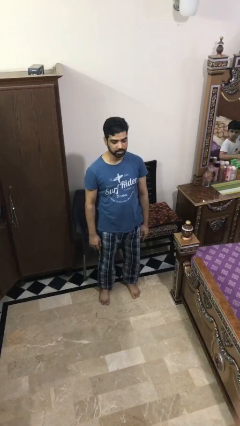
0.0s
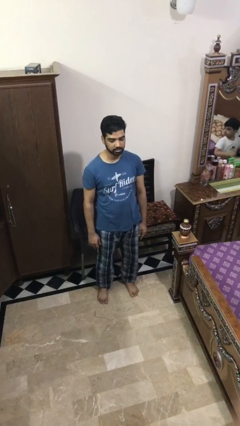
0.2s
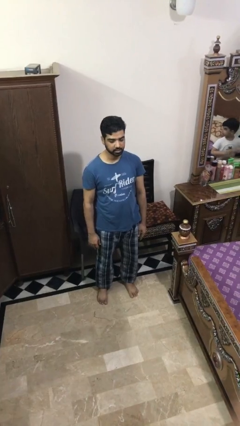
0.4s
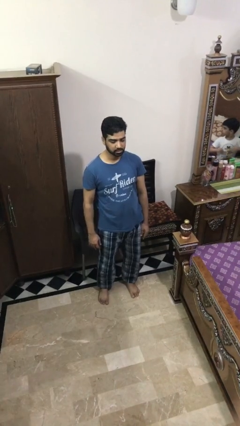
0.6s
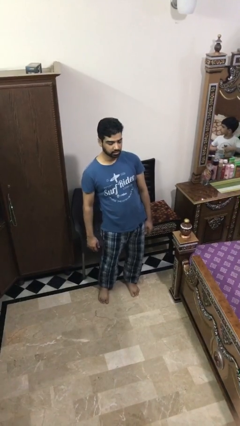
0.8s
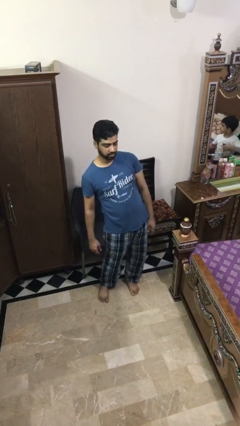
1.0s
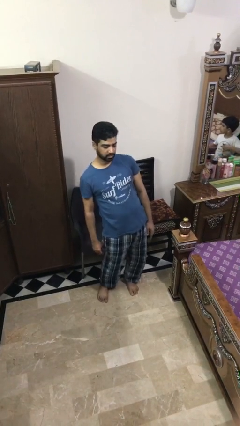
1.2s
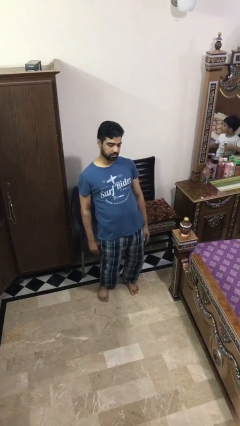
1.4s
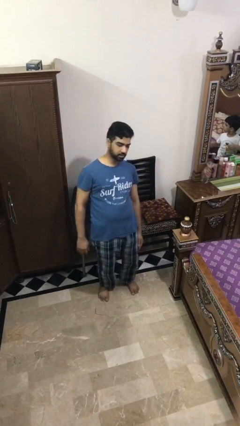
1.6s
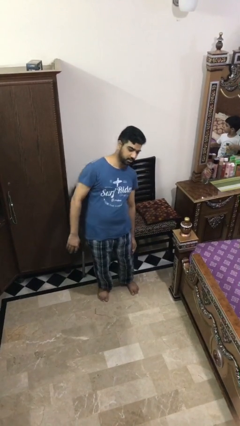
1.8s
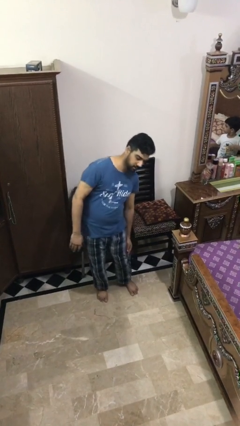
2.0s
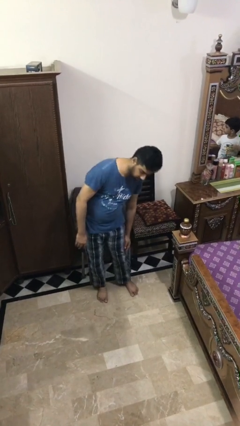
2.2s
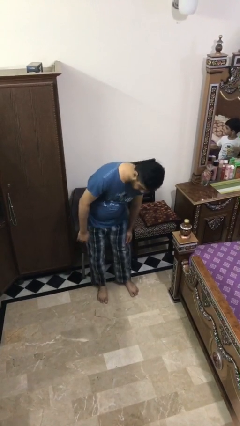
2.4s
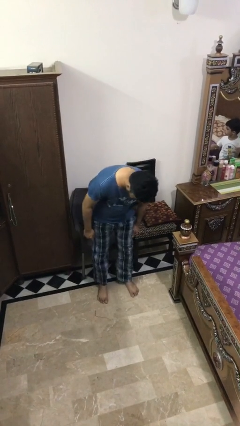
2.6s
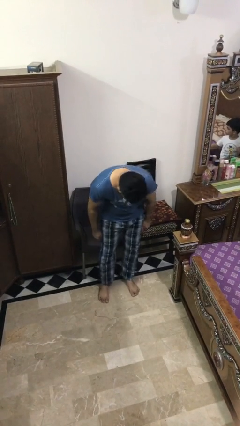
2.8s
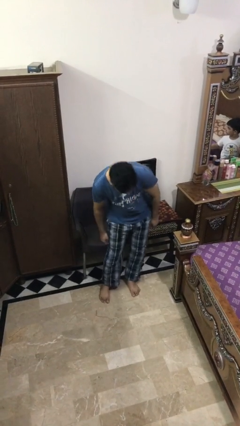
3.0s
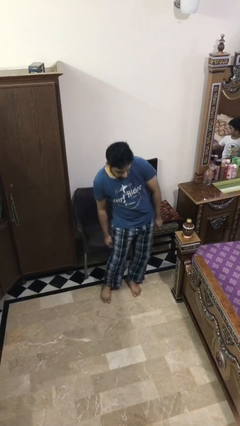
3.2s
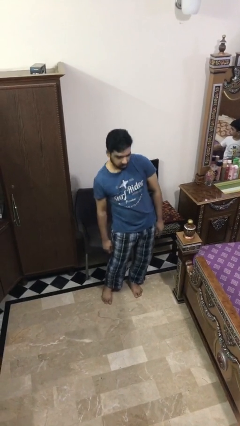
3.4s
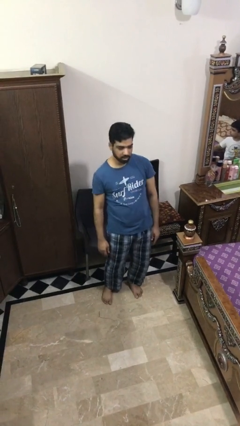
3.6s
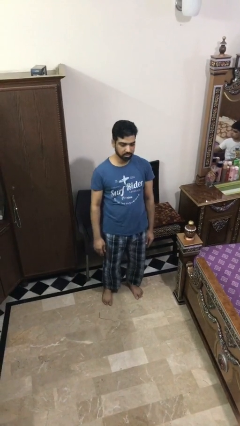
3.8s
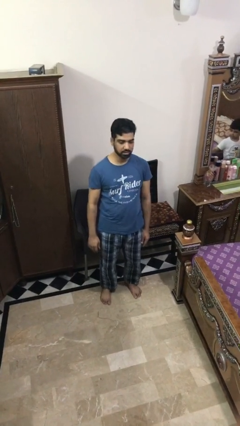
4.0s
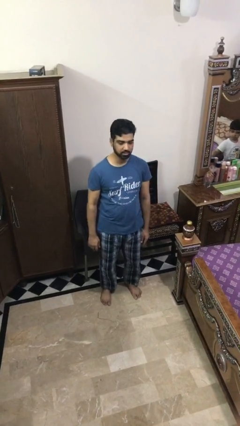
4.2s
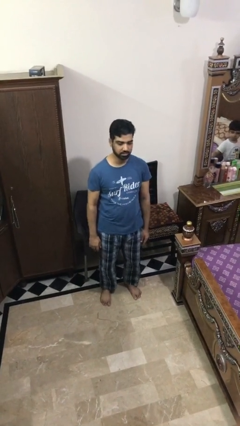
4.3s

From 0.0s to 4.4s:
person wiggles hips

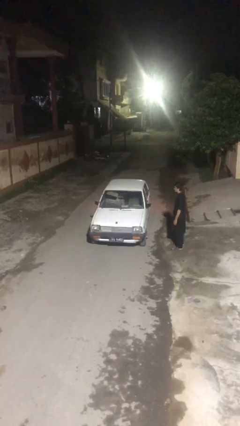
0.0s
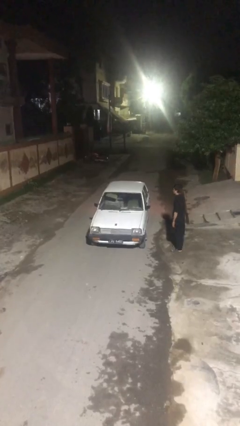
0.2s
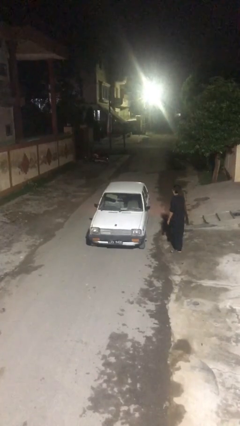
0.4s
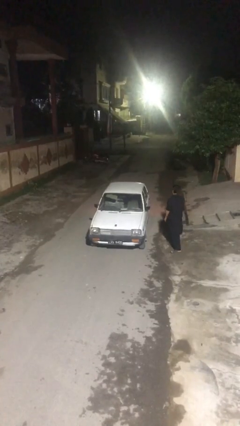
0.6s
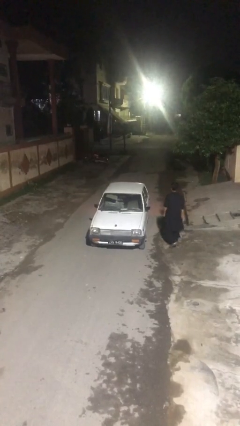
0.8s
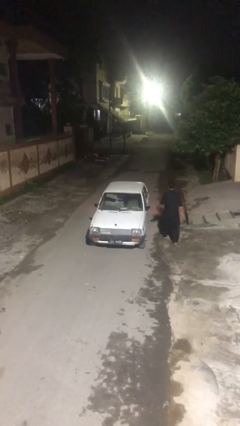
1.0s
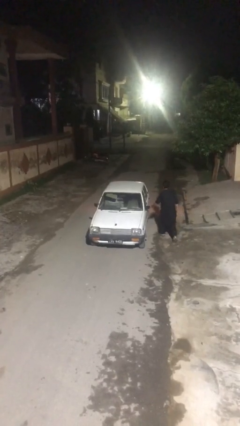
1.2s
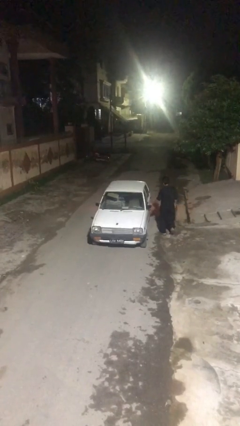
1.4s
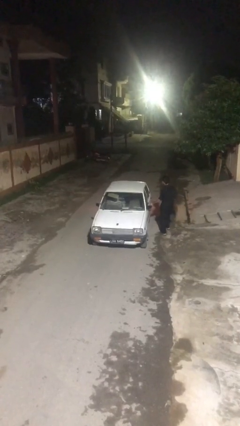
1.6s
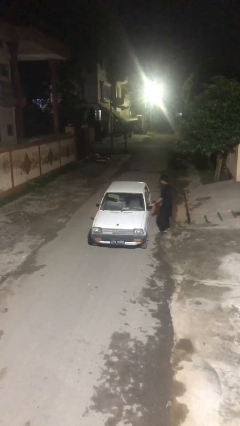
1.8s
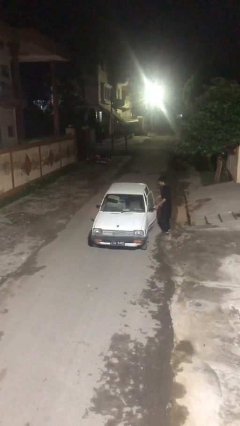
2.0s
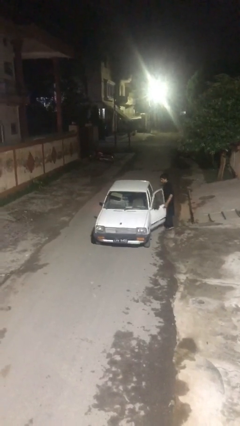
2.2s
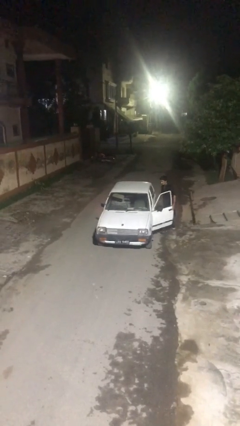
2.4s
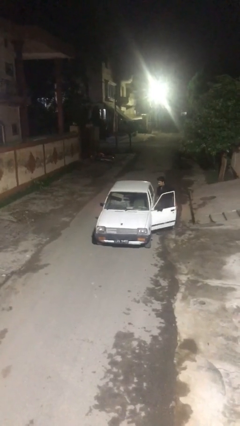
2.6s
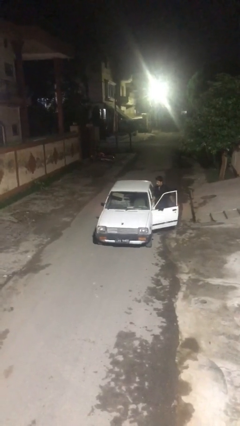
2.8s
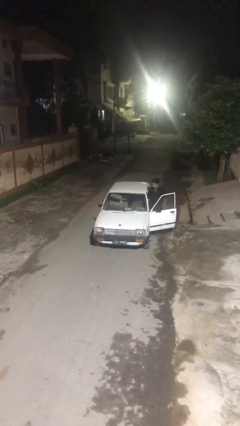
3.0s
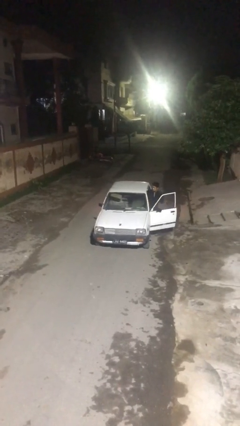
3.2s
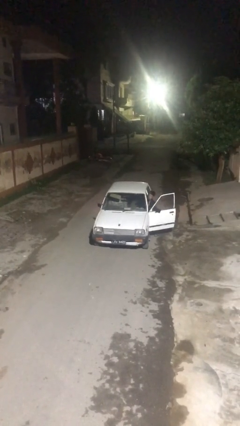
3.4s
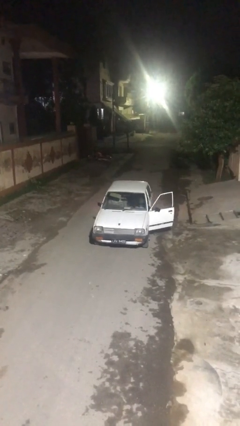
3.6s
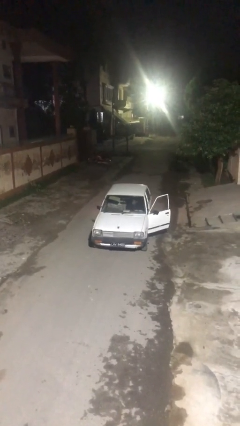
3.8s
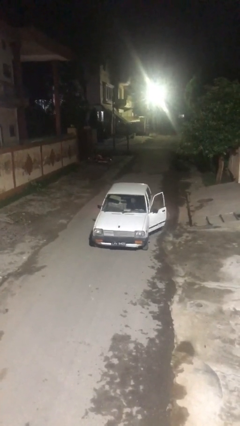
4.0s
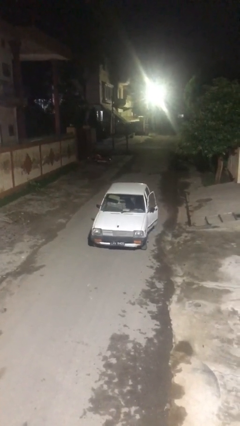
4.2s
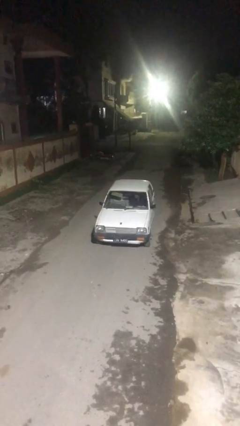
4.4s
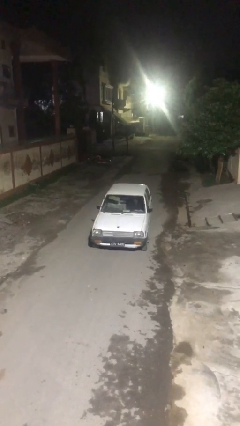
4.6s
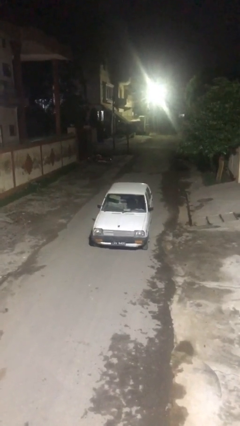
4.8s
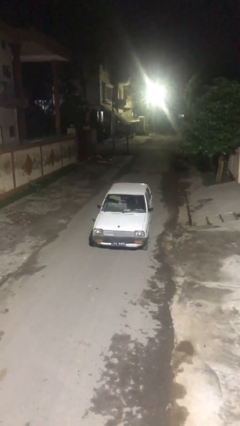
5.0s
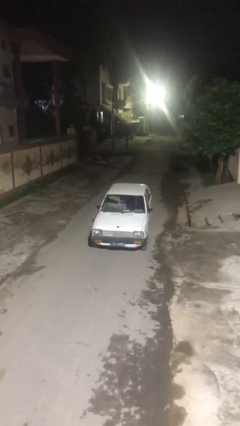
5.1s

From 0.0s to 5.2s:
car picks up person

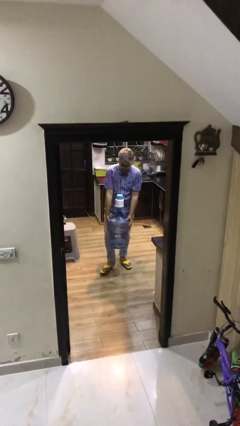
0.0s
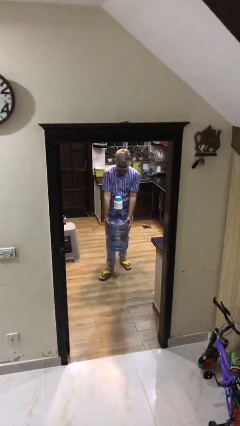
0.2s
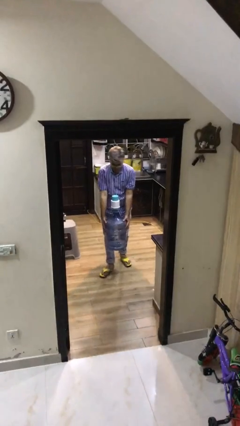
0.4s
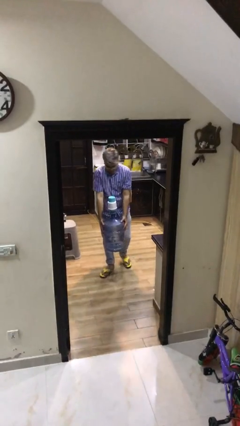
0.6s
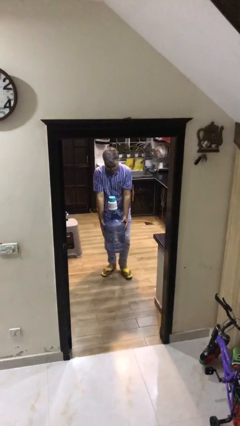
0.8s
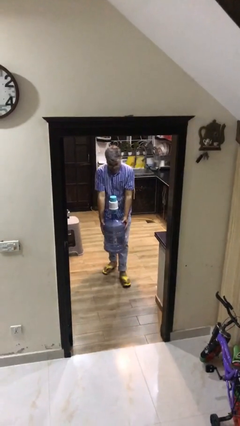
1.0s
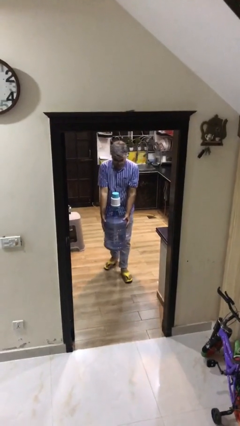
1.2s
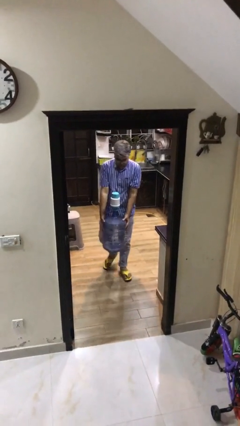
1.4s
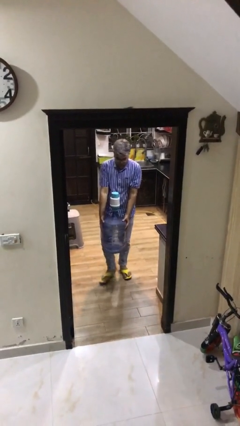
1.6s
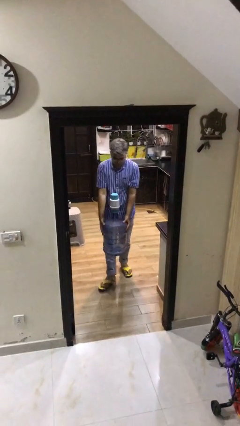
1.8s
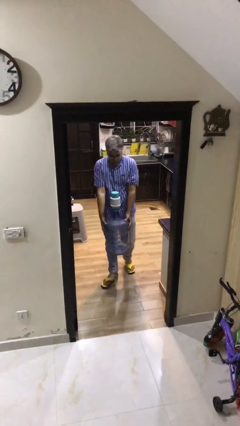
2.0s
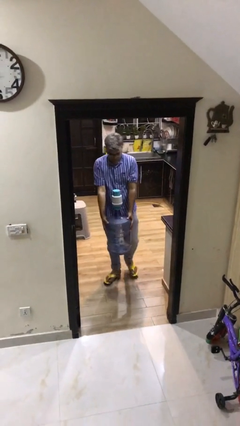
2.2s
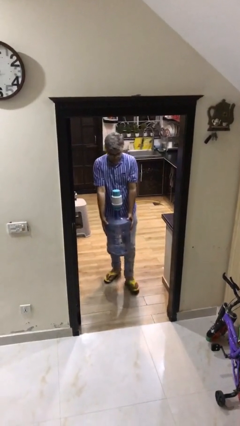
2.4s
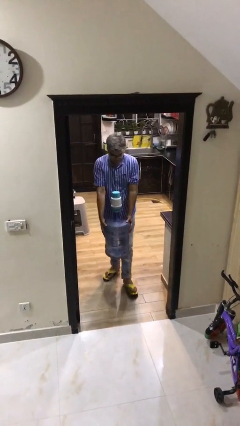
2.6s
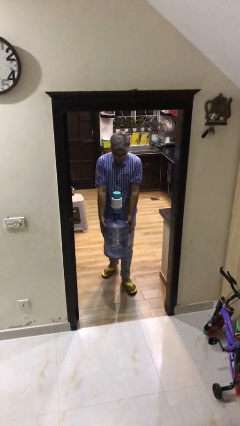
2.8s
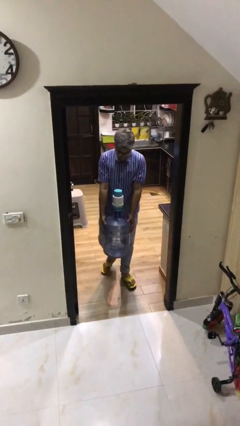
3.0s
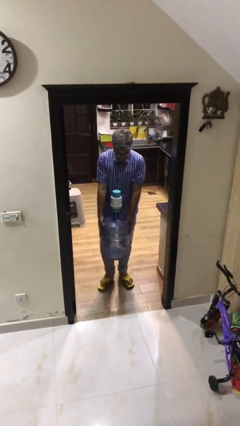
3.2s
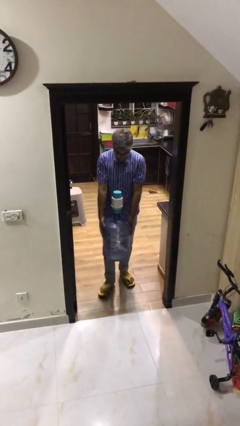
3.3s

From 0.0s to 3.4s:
person carries heavy object

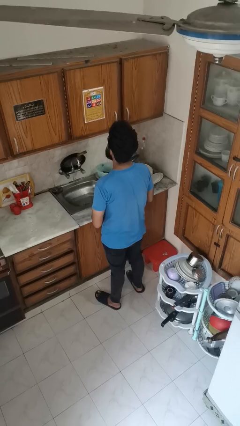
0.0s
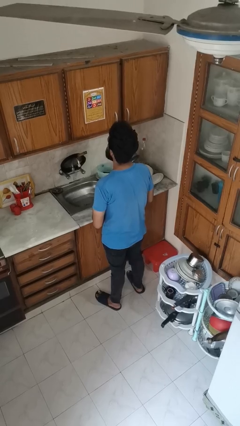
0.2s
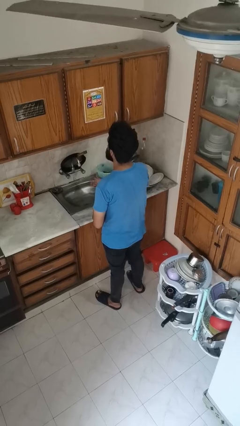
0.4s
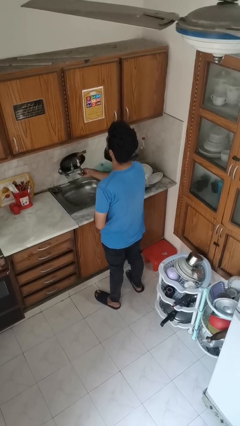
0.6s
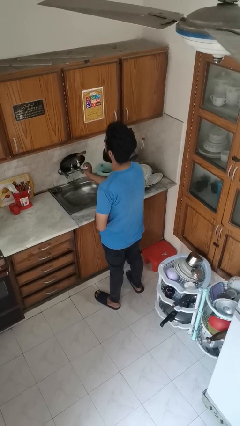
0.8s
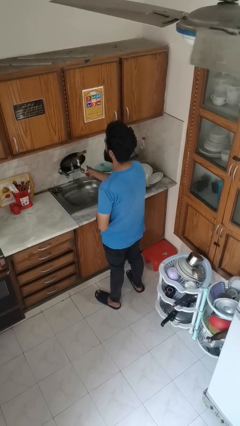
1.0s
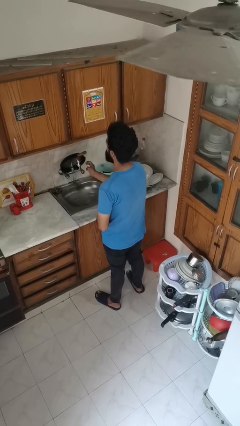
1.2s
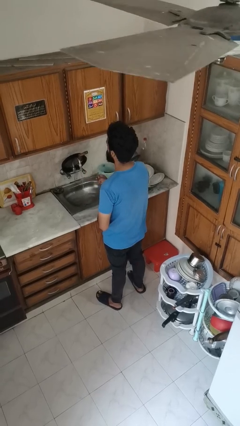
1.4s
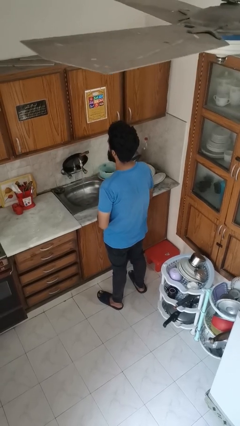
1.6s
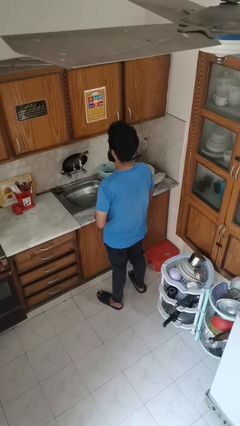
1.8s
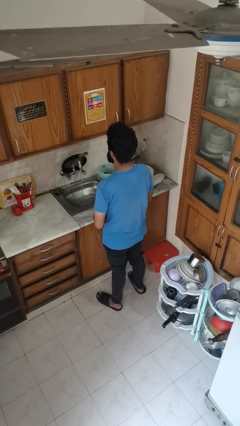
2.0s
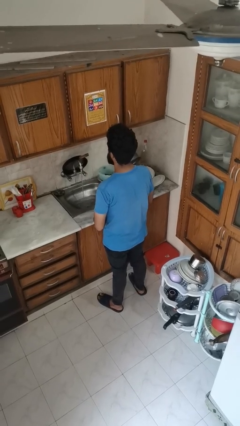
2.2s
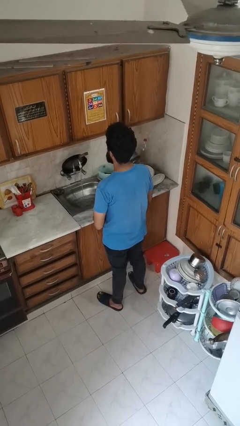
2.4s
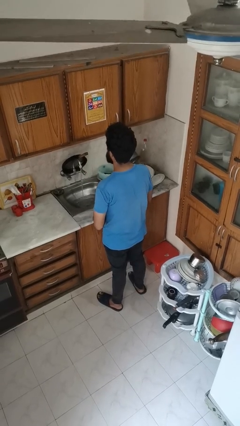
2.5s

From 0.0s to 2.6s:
person turns on faucet

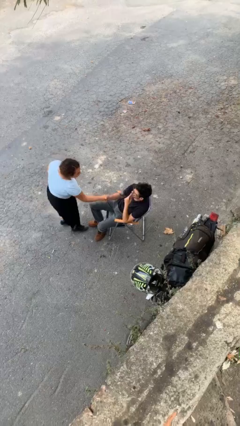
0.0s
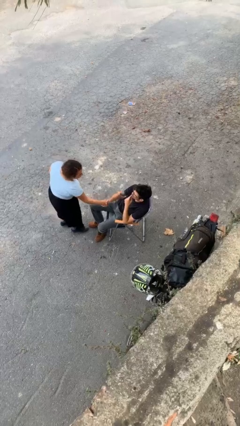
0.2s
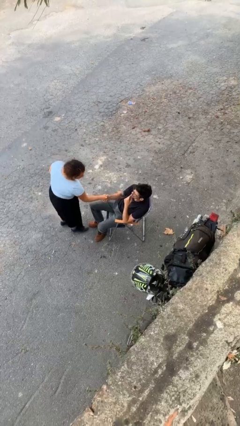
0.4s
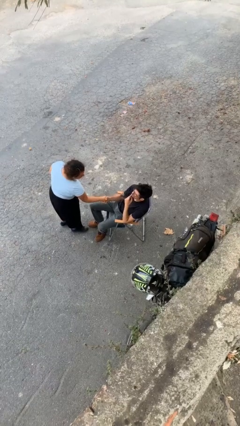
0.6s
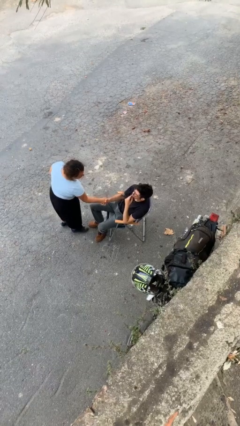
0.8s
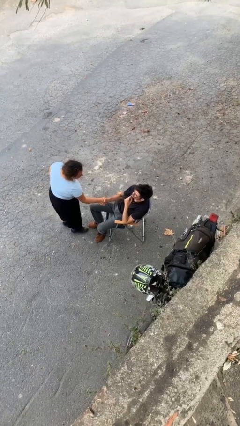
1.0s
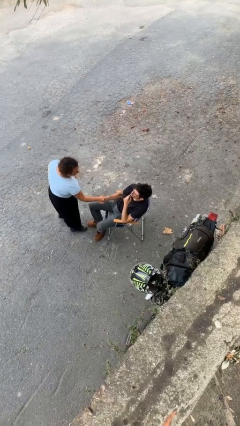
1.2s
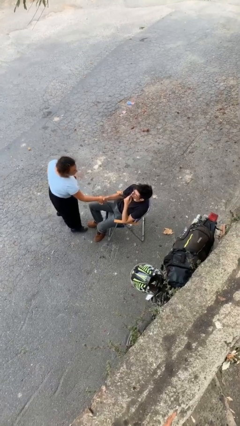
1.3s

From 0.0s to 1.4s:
person shakes hand

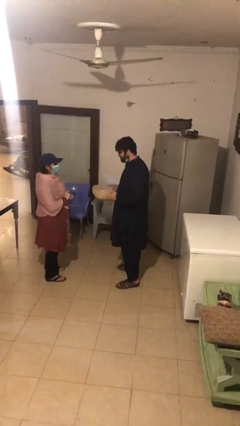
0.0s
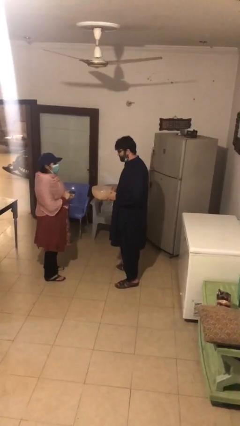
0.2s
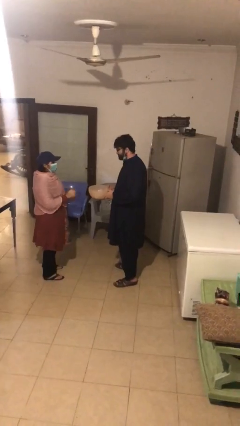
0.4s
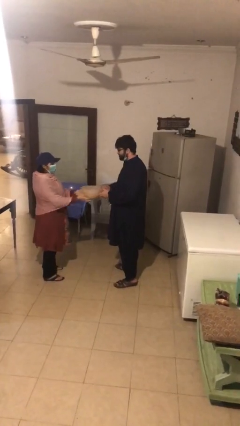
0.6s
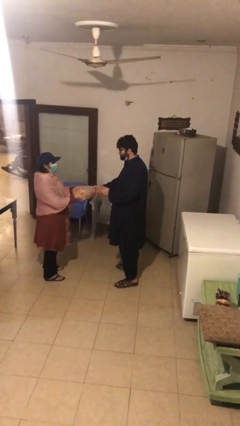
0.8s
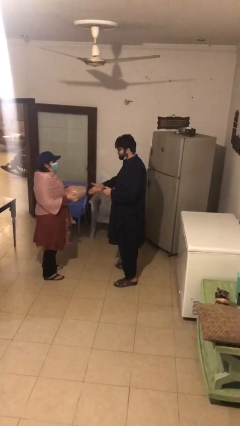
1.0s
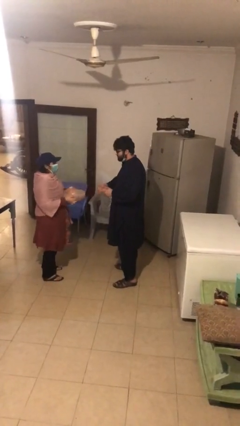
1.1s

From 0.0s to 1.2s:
person transfers object to person
